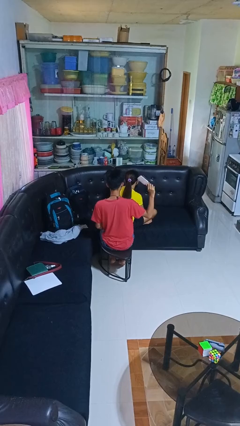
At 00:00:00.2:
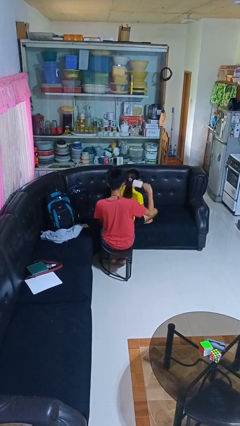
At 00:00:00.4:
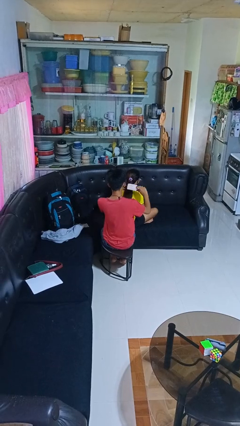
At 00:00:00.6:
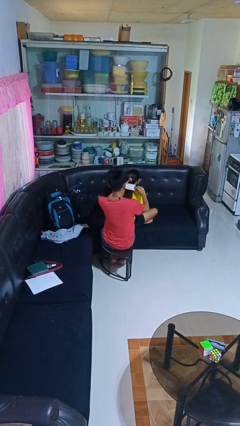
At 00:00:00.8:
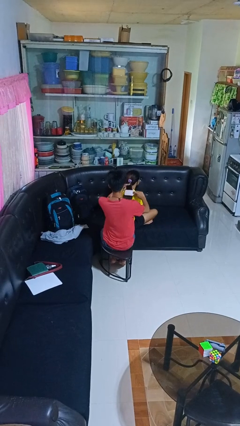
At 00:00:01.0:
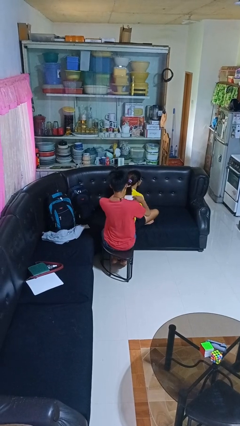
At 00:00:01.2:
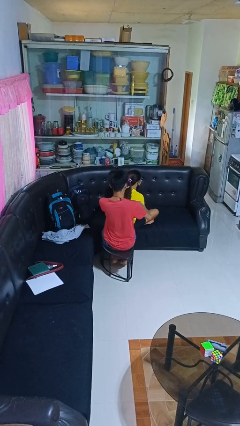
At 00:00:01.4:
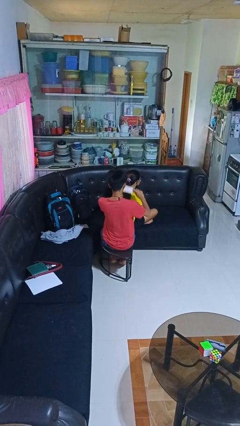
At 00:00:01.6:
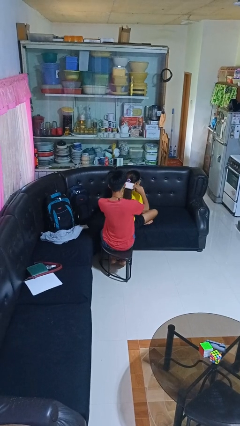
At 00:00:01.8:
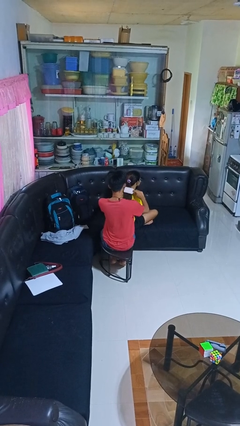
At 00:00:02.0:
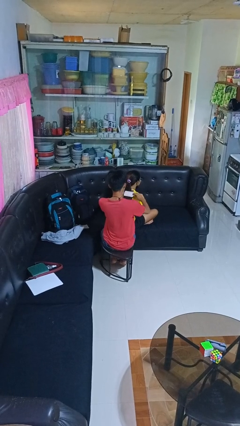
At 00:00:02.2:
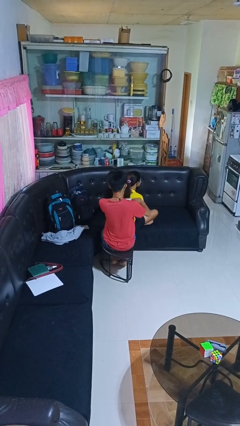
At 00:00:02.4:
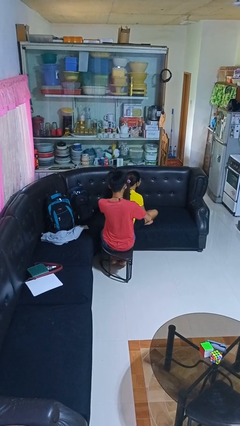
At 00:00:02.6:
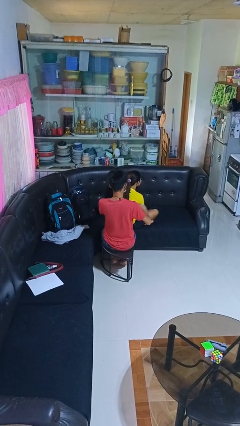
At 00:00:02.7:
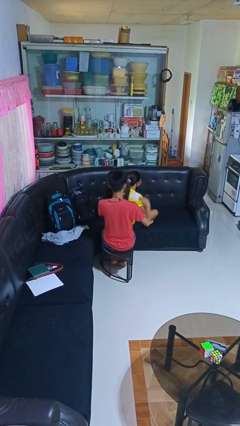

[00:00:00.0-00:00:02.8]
person brushes hair of person

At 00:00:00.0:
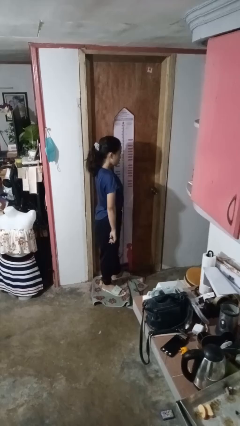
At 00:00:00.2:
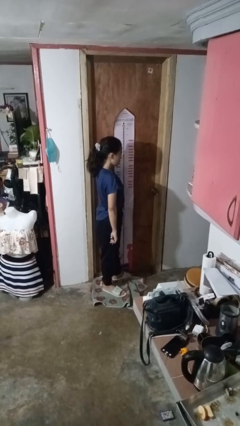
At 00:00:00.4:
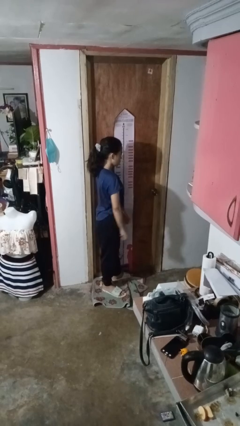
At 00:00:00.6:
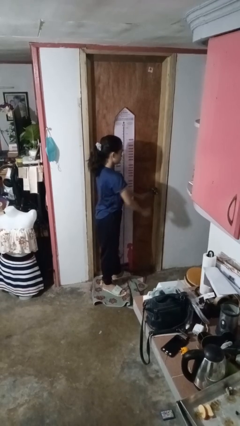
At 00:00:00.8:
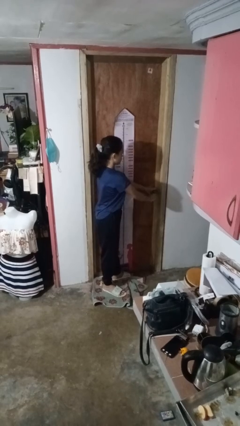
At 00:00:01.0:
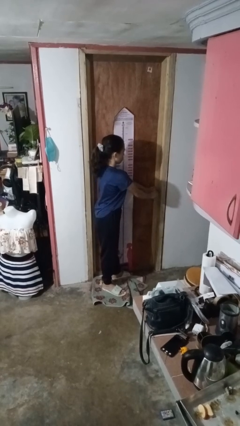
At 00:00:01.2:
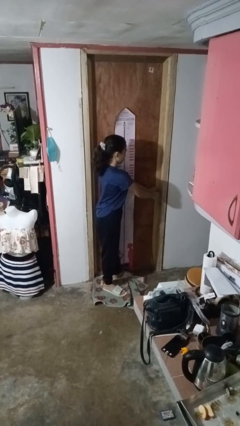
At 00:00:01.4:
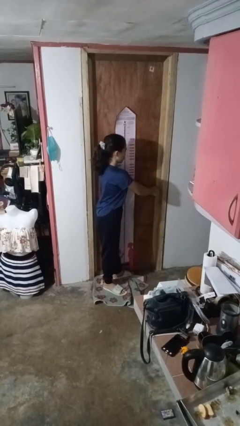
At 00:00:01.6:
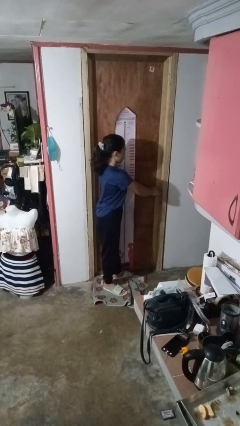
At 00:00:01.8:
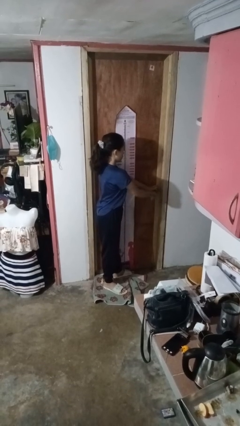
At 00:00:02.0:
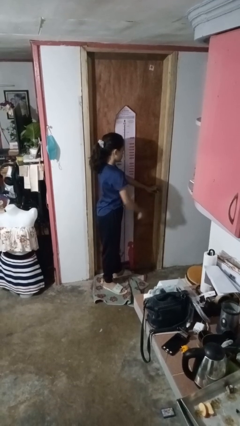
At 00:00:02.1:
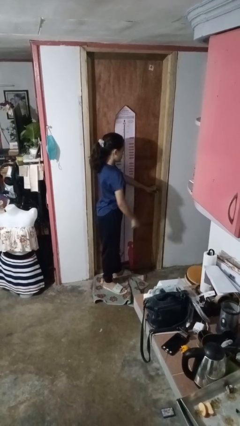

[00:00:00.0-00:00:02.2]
person unlocks door with keys

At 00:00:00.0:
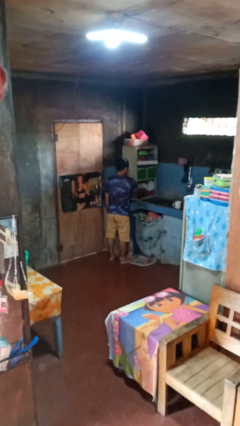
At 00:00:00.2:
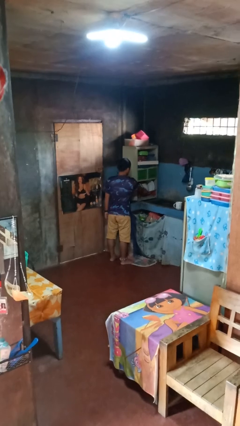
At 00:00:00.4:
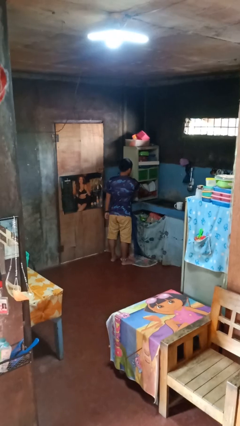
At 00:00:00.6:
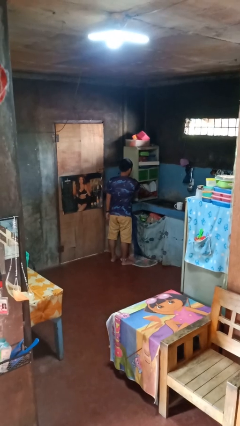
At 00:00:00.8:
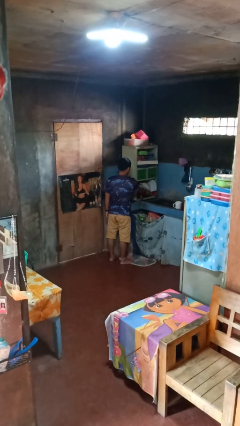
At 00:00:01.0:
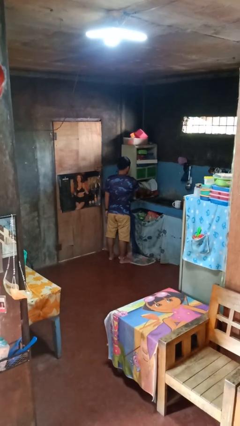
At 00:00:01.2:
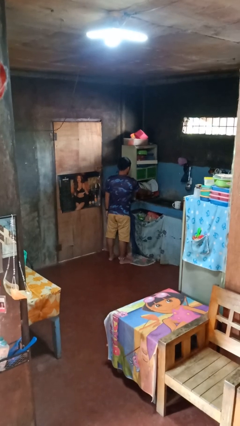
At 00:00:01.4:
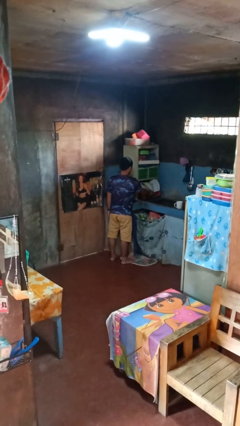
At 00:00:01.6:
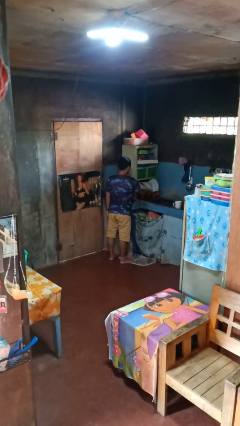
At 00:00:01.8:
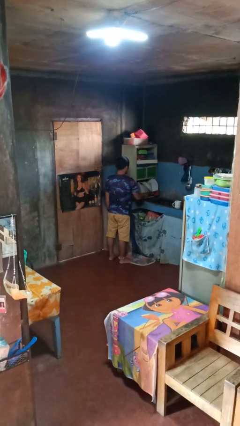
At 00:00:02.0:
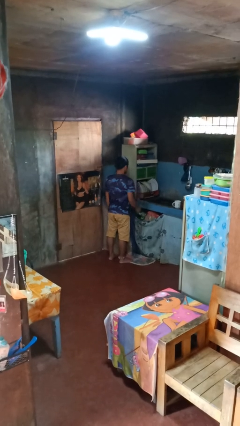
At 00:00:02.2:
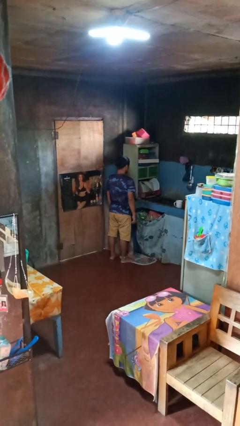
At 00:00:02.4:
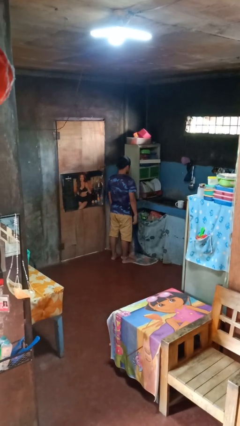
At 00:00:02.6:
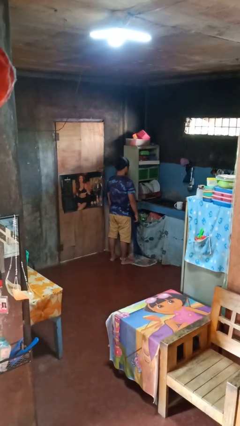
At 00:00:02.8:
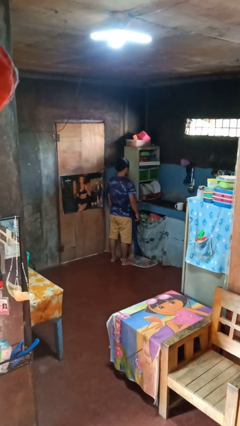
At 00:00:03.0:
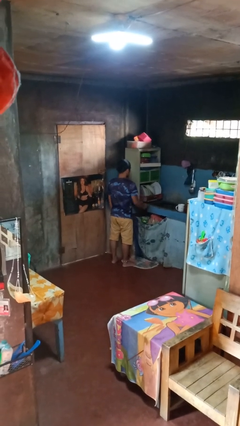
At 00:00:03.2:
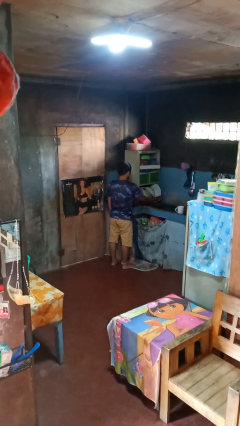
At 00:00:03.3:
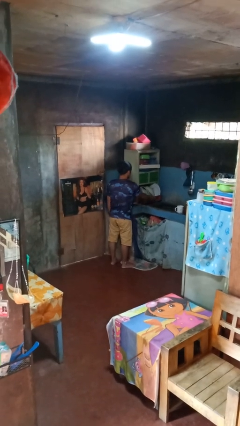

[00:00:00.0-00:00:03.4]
person opens dishwasher

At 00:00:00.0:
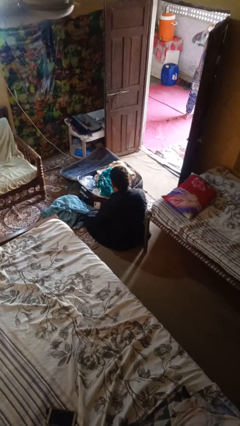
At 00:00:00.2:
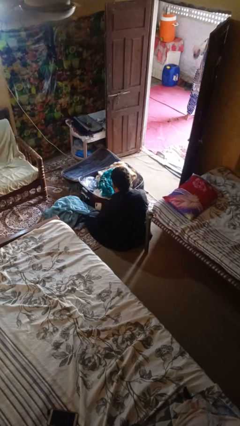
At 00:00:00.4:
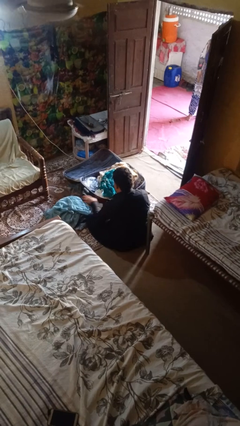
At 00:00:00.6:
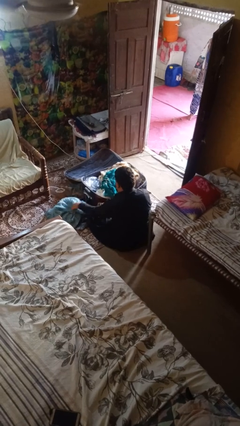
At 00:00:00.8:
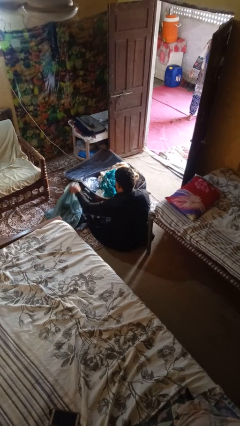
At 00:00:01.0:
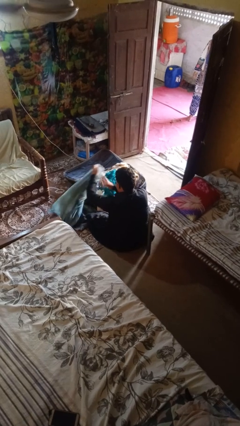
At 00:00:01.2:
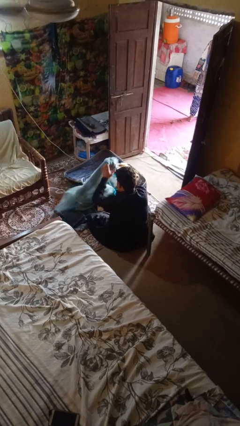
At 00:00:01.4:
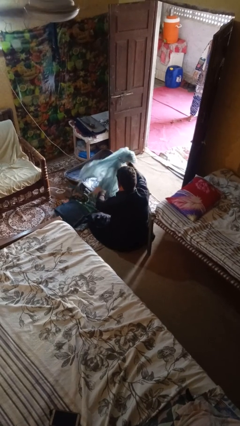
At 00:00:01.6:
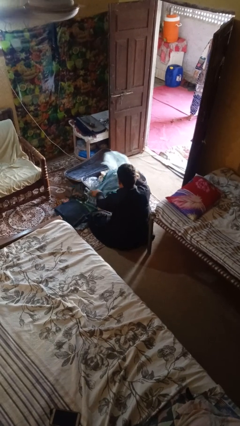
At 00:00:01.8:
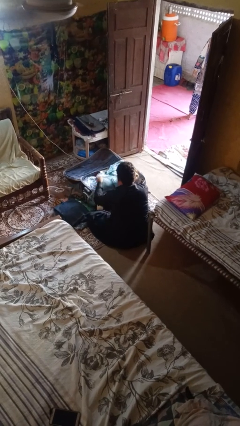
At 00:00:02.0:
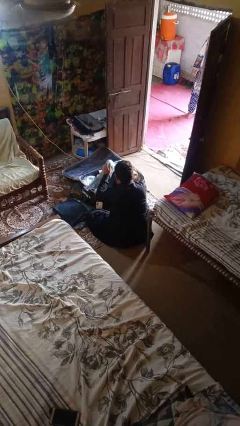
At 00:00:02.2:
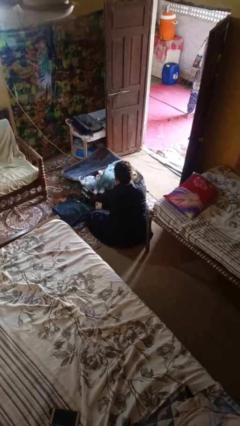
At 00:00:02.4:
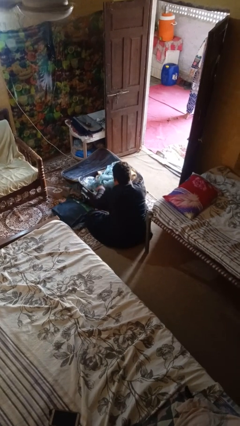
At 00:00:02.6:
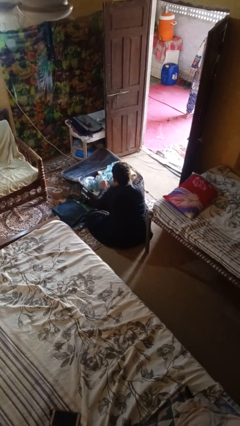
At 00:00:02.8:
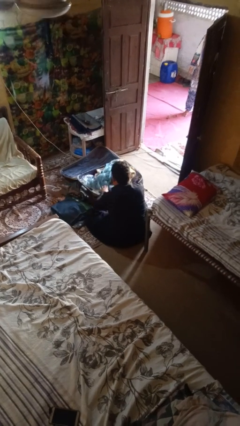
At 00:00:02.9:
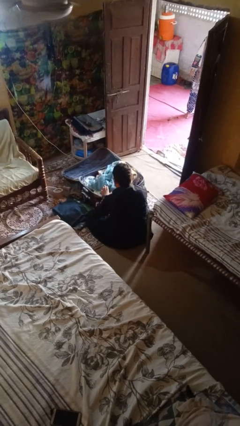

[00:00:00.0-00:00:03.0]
person loads clothes into suitcase

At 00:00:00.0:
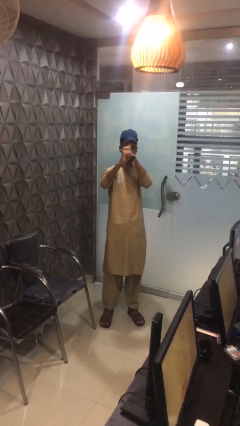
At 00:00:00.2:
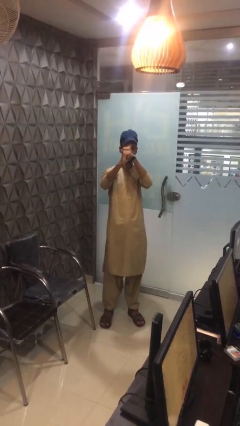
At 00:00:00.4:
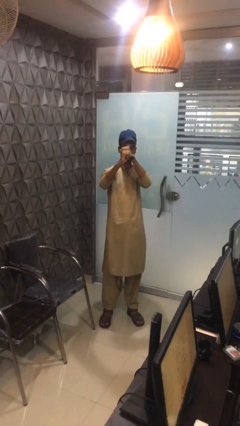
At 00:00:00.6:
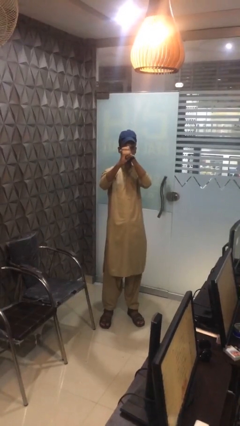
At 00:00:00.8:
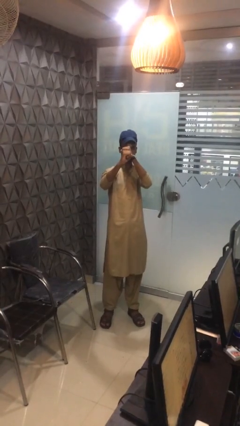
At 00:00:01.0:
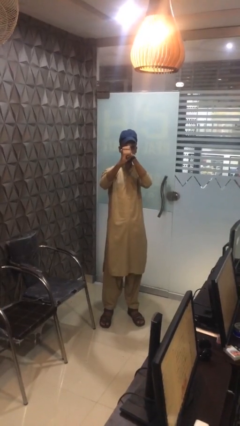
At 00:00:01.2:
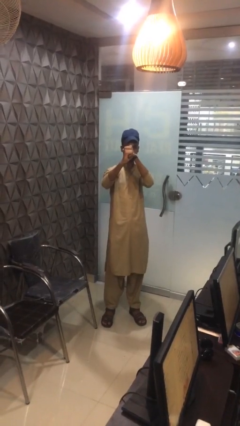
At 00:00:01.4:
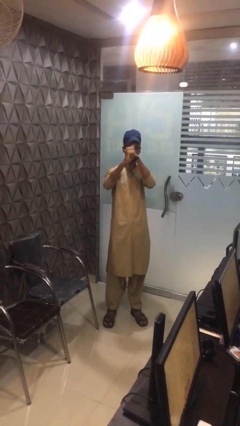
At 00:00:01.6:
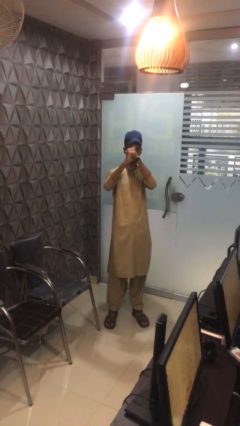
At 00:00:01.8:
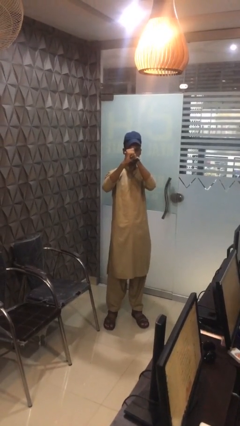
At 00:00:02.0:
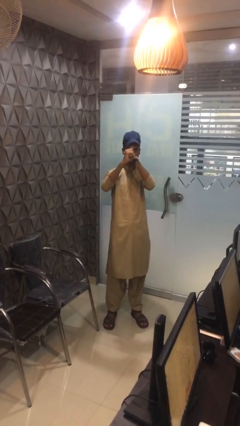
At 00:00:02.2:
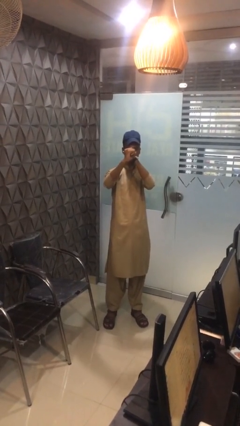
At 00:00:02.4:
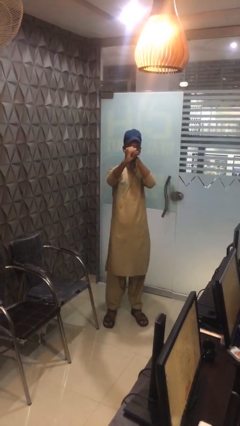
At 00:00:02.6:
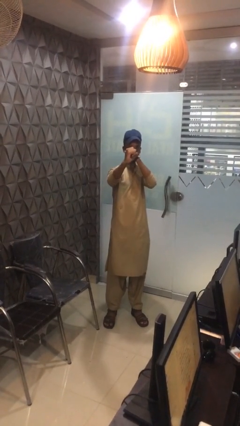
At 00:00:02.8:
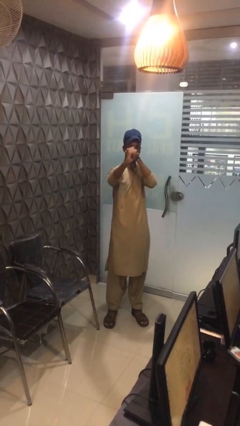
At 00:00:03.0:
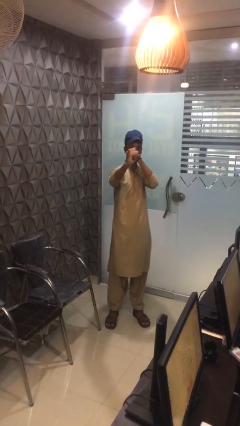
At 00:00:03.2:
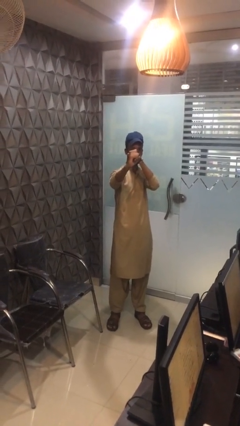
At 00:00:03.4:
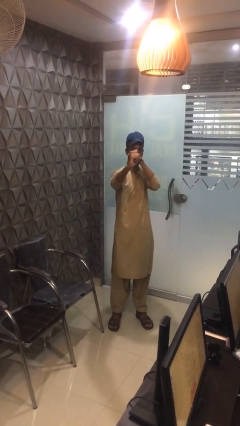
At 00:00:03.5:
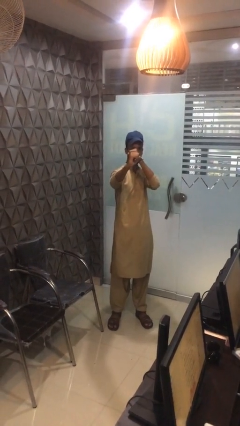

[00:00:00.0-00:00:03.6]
person gestures zoom in

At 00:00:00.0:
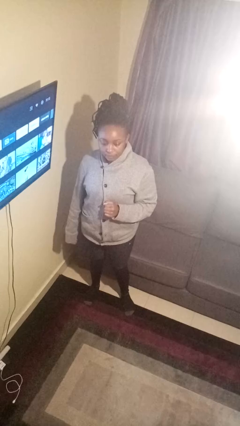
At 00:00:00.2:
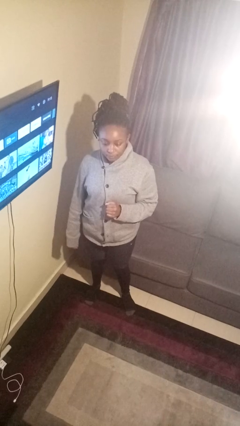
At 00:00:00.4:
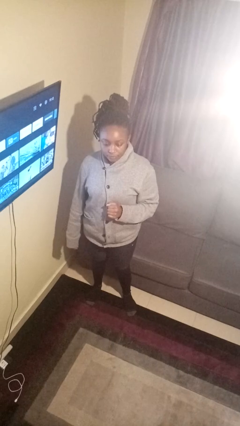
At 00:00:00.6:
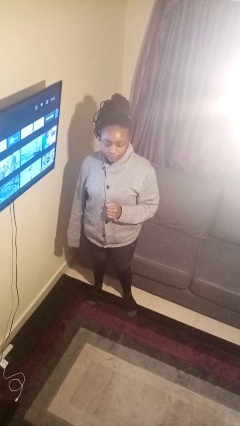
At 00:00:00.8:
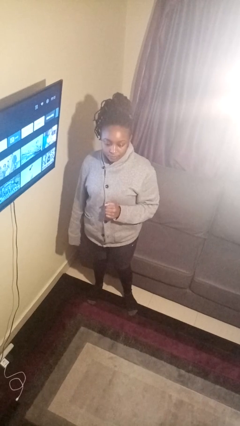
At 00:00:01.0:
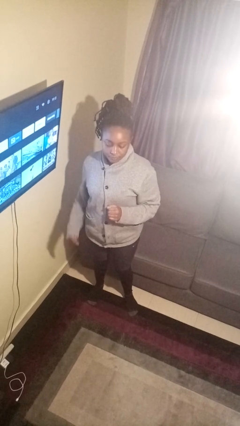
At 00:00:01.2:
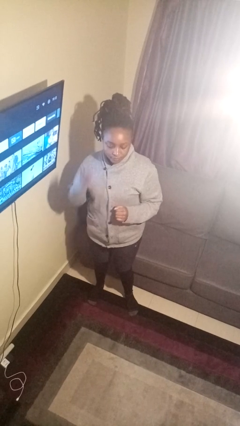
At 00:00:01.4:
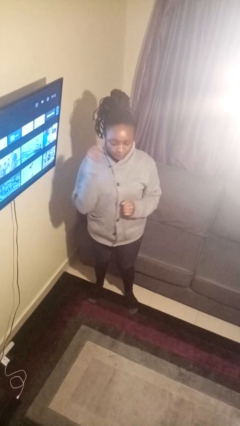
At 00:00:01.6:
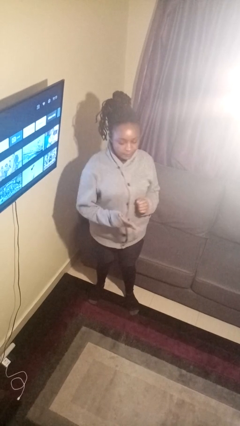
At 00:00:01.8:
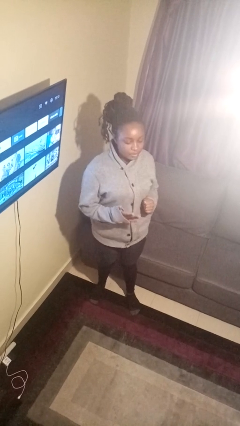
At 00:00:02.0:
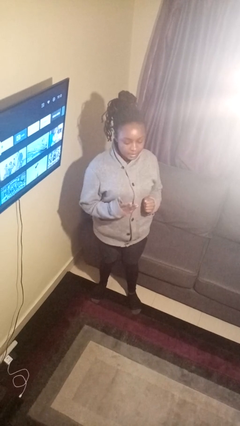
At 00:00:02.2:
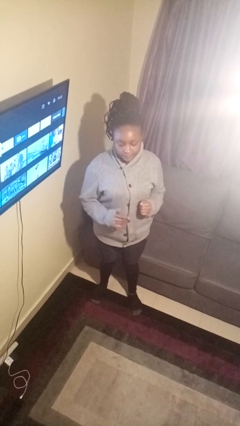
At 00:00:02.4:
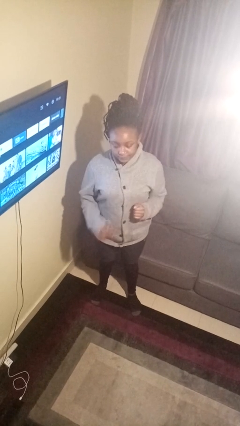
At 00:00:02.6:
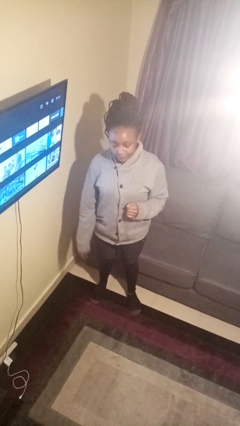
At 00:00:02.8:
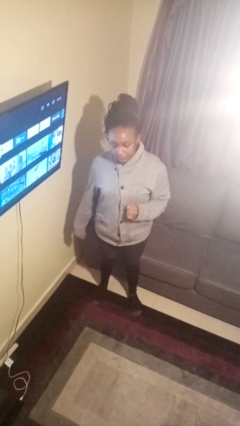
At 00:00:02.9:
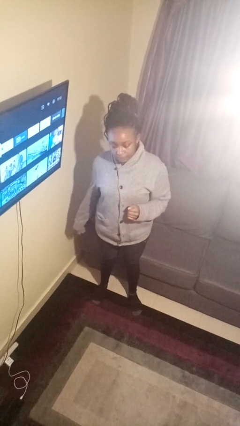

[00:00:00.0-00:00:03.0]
person karate chop
